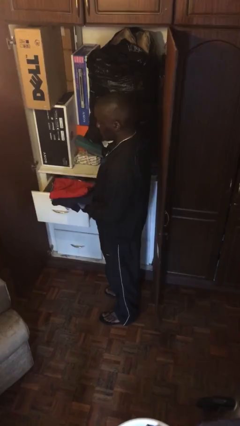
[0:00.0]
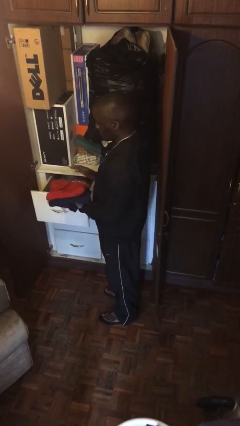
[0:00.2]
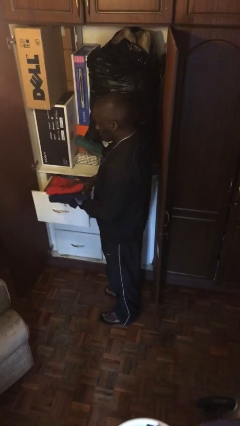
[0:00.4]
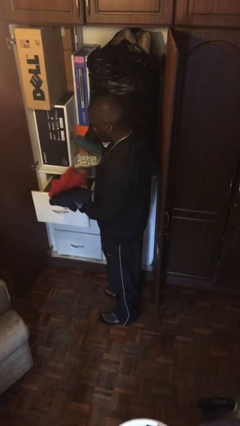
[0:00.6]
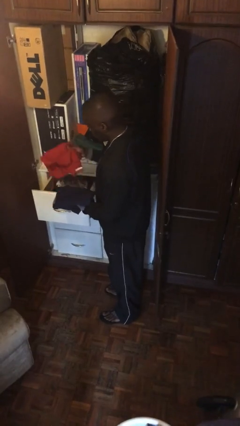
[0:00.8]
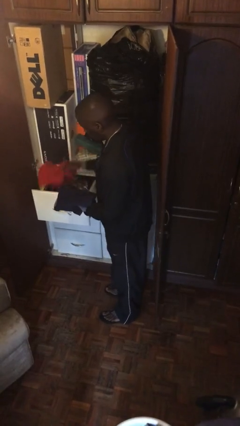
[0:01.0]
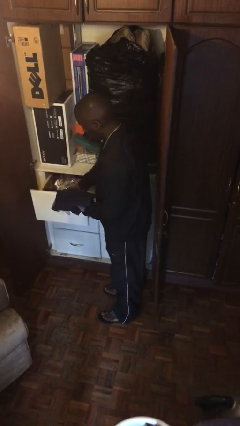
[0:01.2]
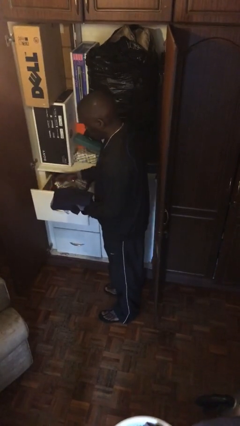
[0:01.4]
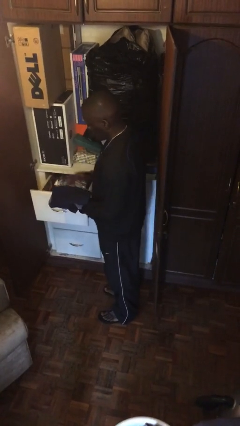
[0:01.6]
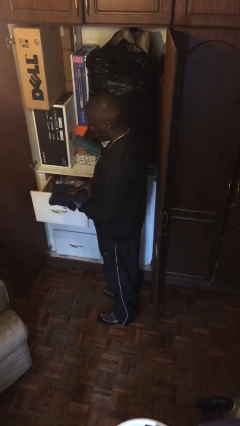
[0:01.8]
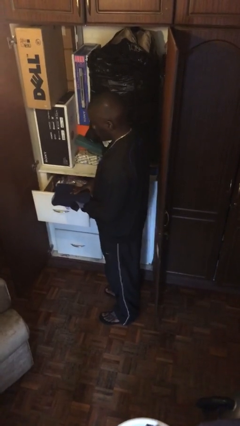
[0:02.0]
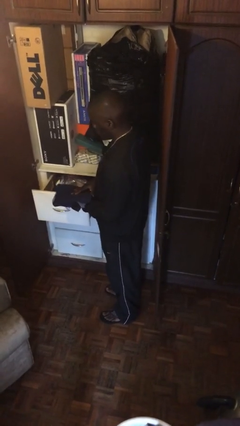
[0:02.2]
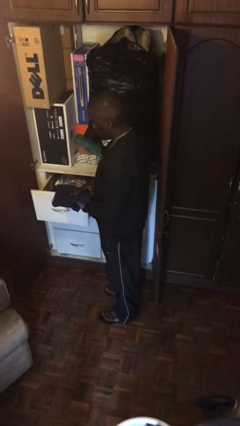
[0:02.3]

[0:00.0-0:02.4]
person puts clothes into dresser

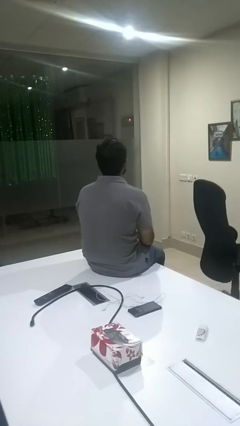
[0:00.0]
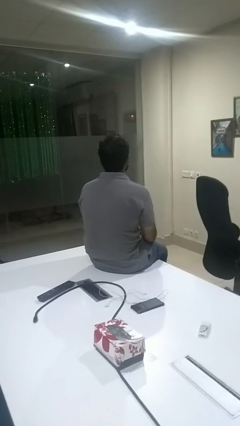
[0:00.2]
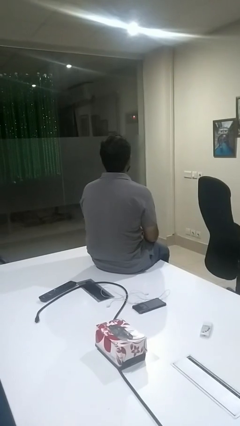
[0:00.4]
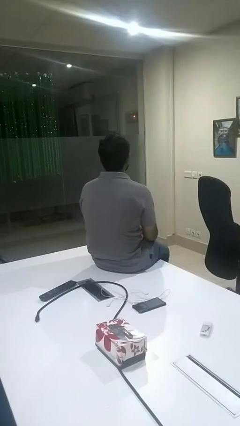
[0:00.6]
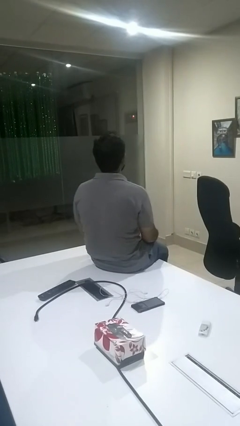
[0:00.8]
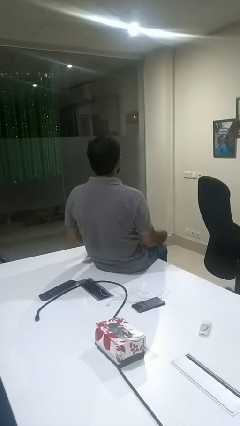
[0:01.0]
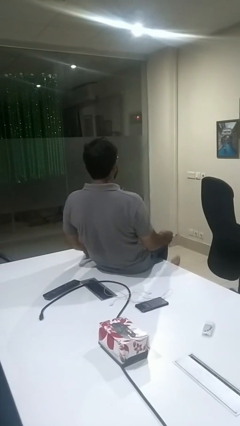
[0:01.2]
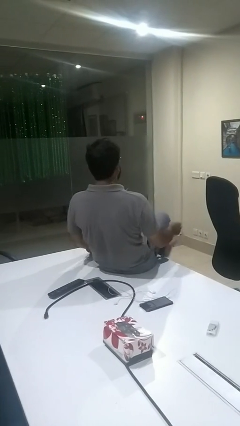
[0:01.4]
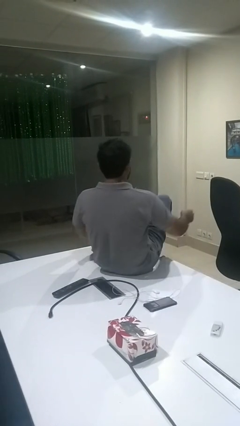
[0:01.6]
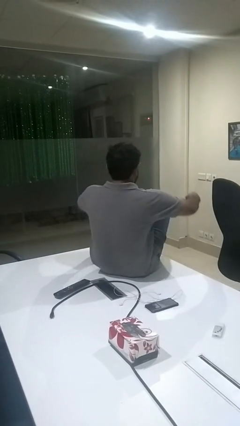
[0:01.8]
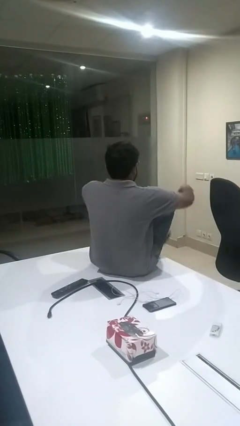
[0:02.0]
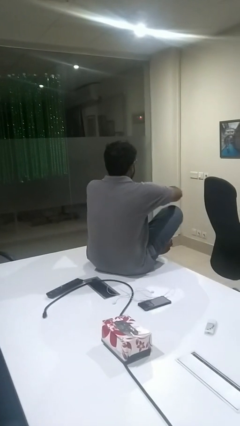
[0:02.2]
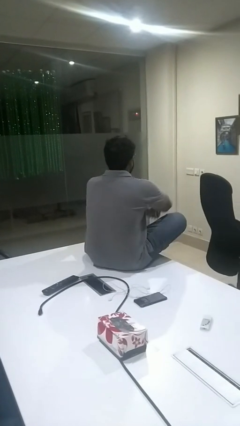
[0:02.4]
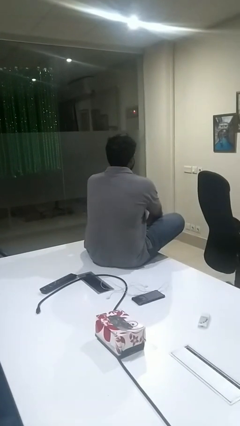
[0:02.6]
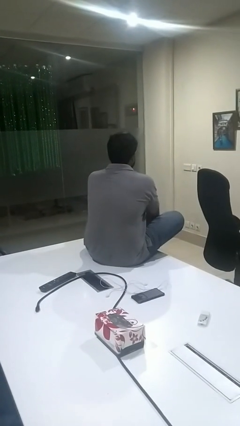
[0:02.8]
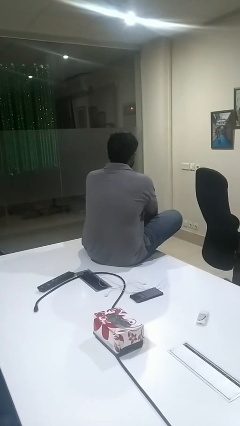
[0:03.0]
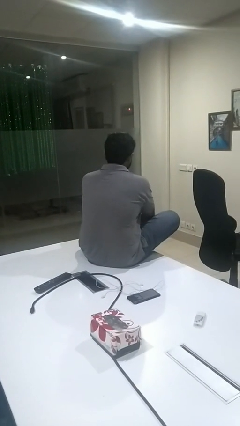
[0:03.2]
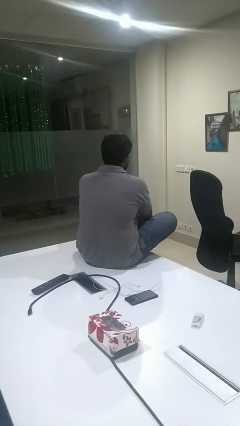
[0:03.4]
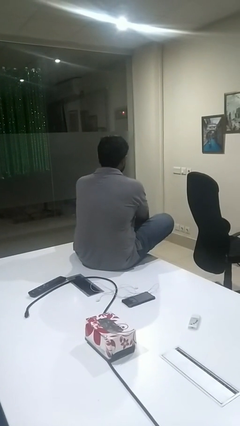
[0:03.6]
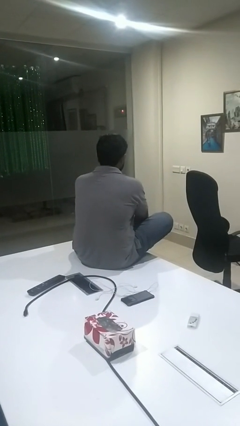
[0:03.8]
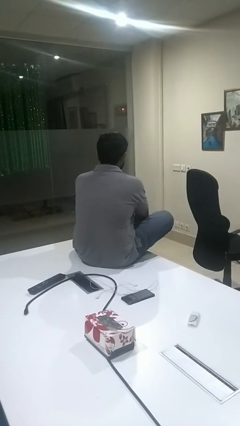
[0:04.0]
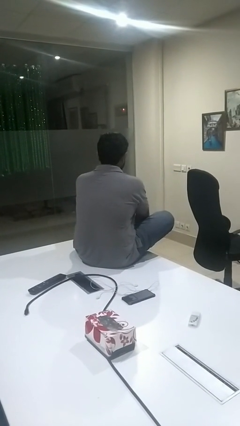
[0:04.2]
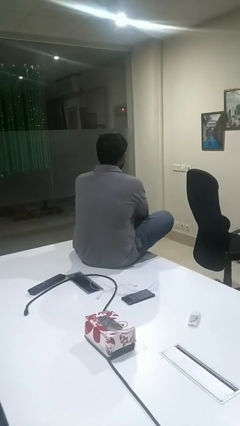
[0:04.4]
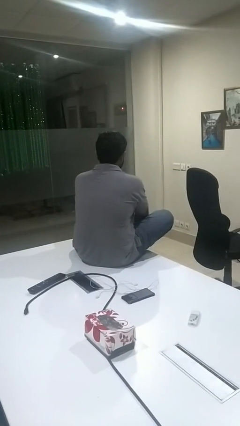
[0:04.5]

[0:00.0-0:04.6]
person puts feet up

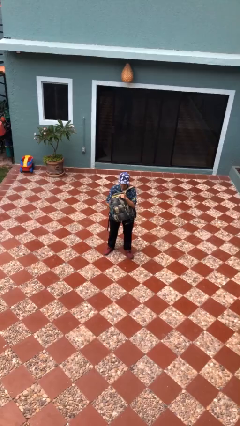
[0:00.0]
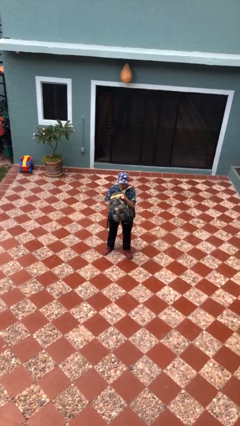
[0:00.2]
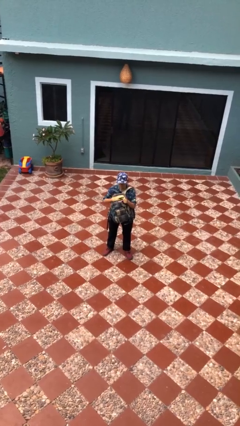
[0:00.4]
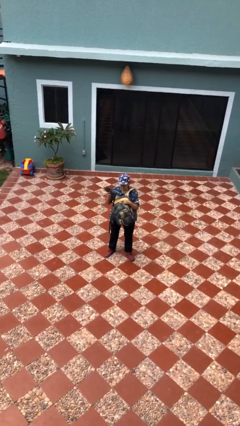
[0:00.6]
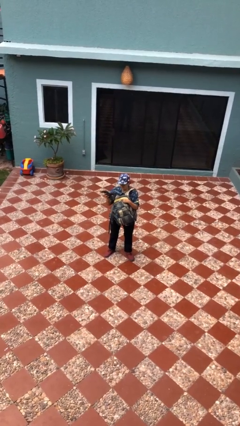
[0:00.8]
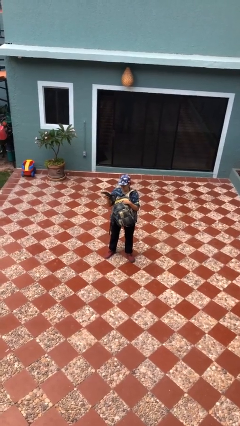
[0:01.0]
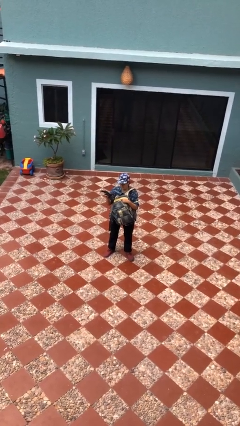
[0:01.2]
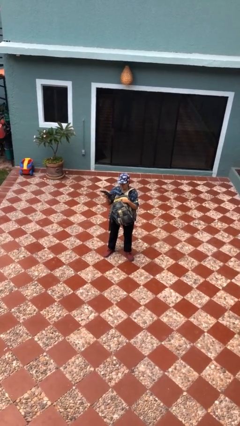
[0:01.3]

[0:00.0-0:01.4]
person takes object from backpack

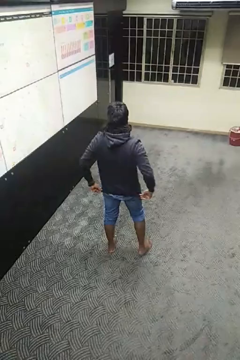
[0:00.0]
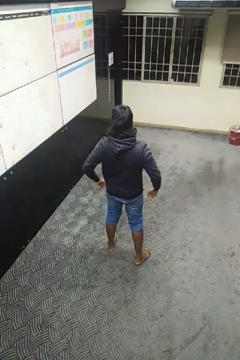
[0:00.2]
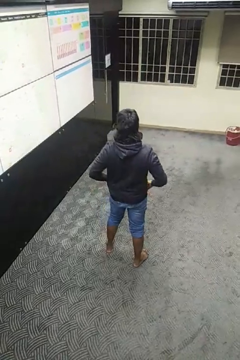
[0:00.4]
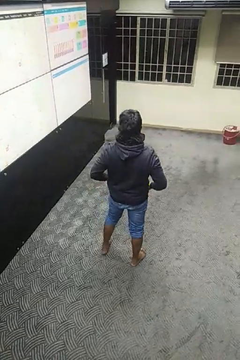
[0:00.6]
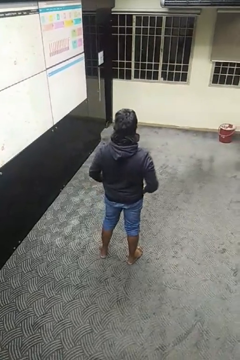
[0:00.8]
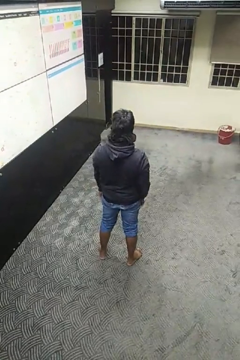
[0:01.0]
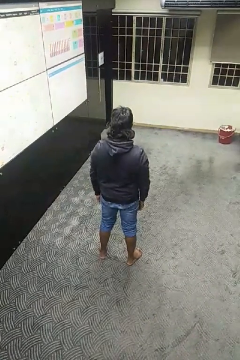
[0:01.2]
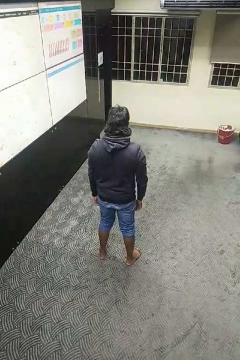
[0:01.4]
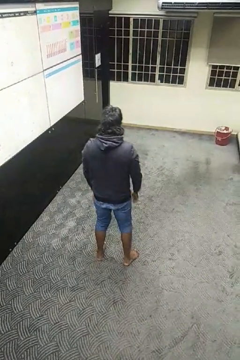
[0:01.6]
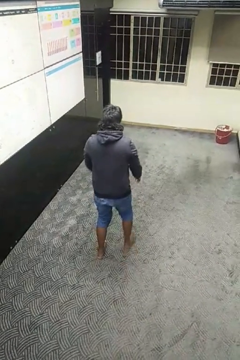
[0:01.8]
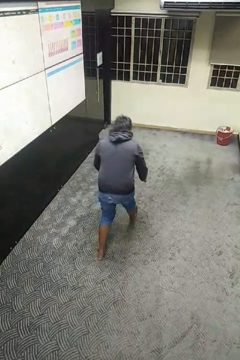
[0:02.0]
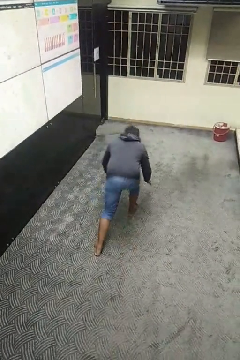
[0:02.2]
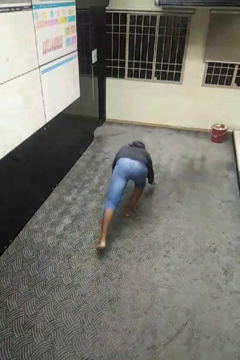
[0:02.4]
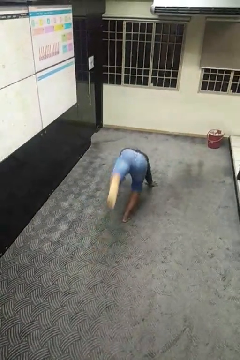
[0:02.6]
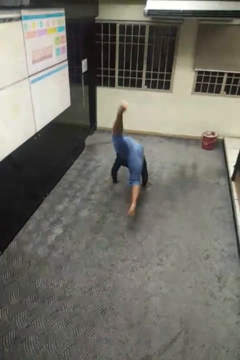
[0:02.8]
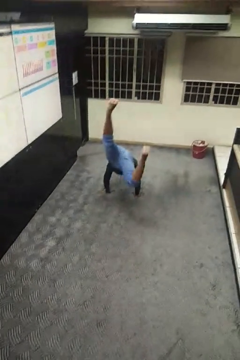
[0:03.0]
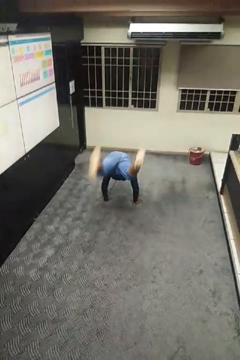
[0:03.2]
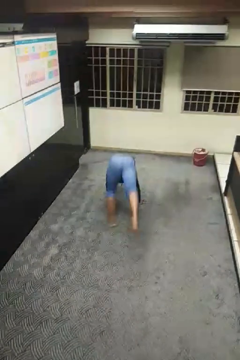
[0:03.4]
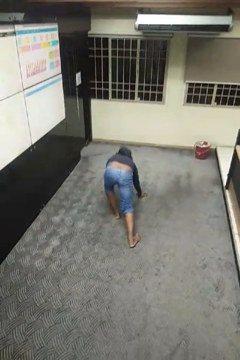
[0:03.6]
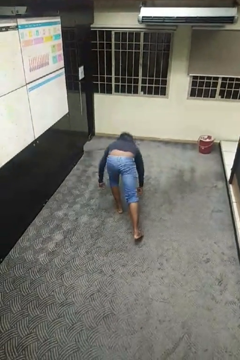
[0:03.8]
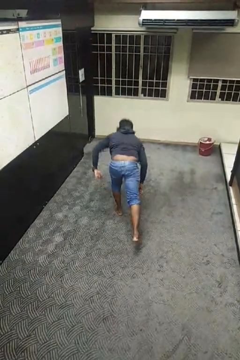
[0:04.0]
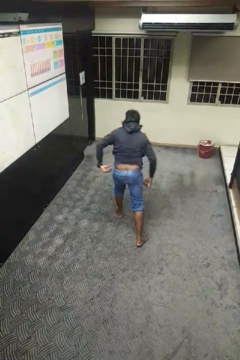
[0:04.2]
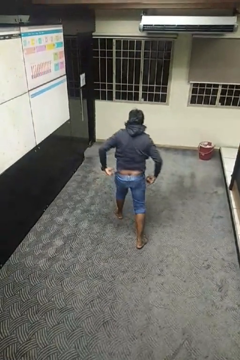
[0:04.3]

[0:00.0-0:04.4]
person handstand

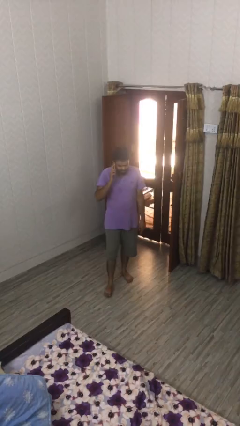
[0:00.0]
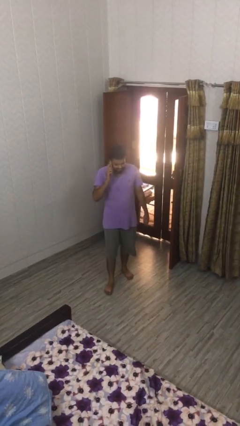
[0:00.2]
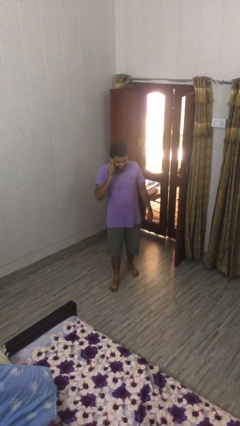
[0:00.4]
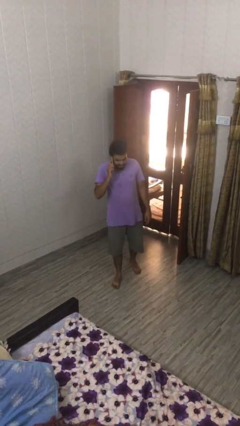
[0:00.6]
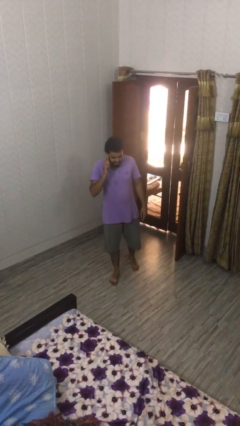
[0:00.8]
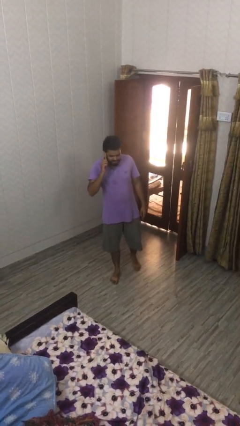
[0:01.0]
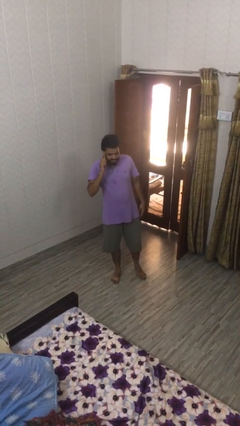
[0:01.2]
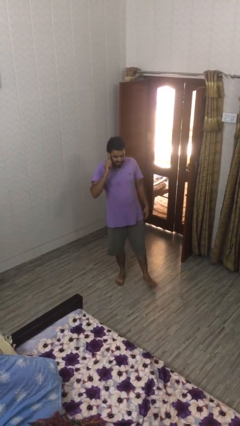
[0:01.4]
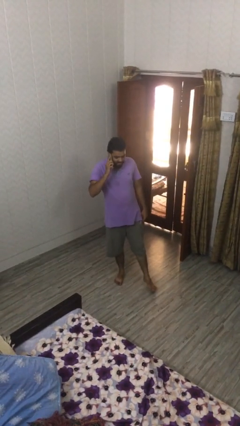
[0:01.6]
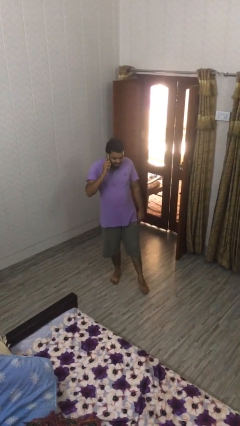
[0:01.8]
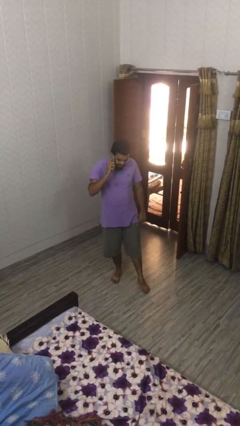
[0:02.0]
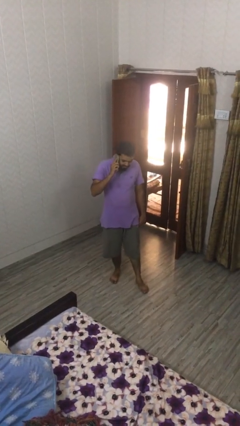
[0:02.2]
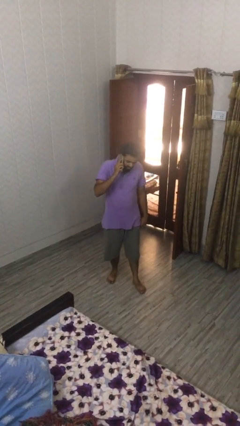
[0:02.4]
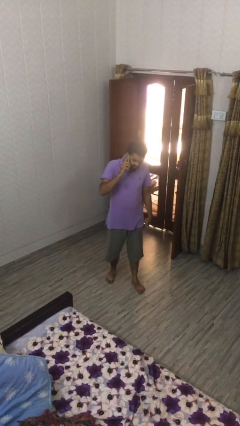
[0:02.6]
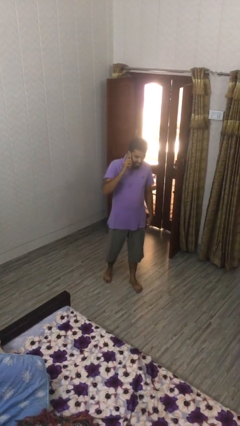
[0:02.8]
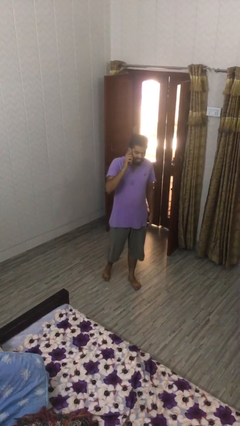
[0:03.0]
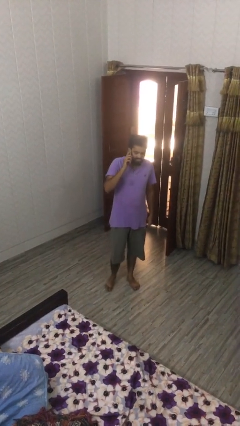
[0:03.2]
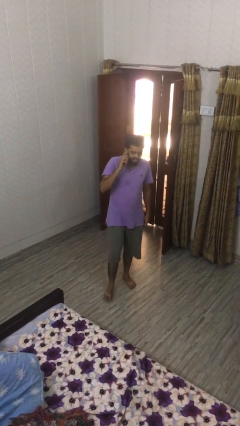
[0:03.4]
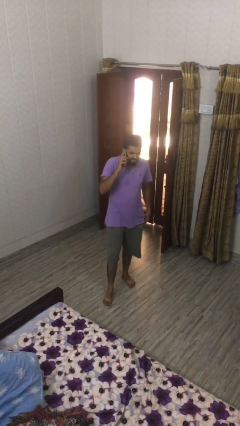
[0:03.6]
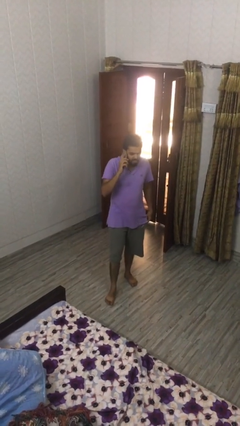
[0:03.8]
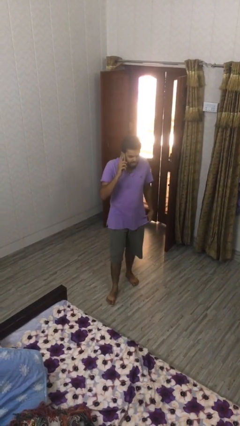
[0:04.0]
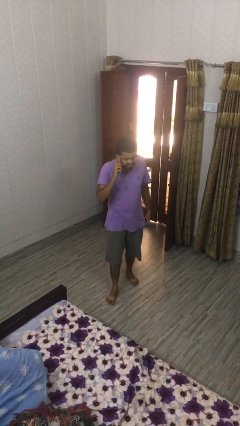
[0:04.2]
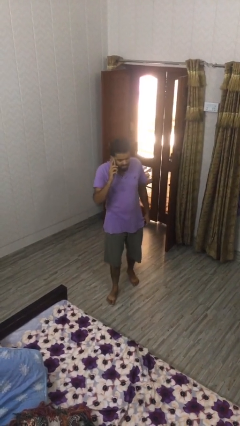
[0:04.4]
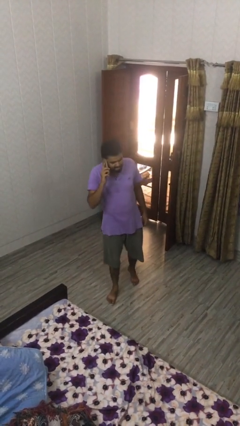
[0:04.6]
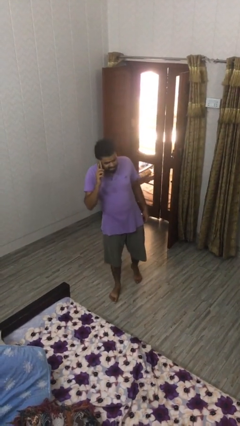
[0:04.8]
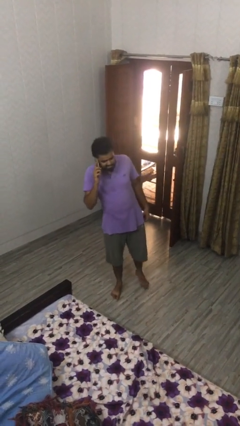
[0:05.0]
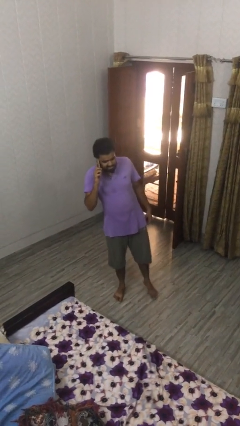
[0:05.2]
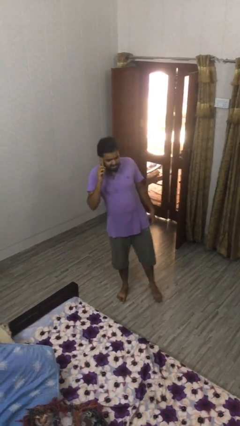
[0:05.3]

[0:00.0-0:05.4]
person talks on phone

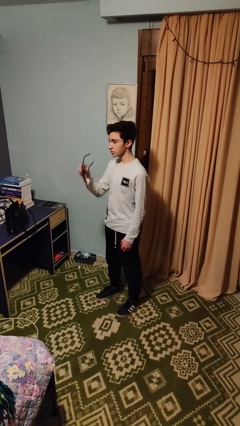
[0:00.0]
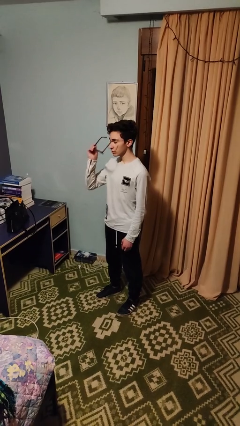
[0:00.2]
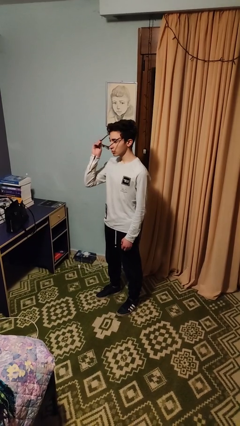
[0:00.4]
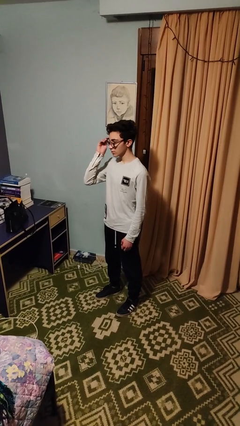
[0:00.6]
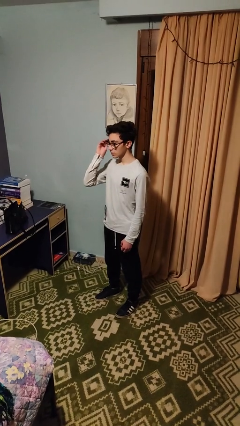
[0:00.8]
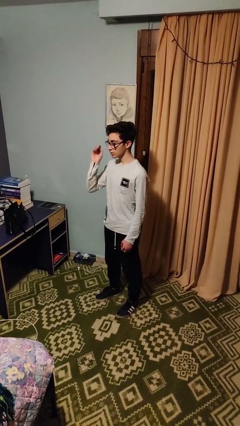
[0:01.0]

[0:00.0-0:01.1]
person puts on glasses
